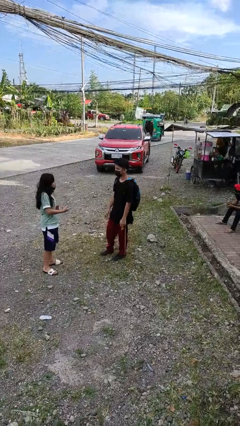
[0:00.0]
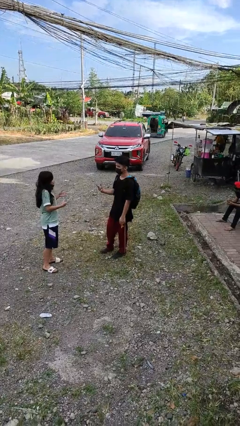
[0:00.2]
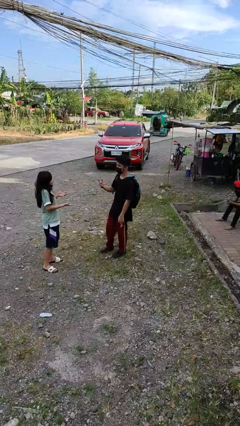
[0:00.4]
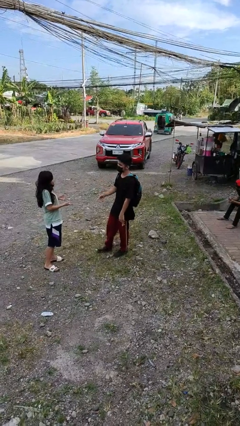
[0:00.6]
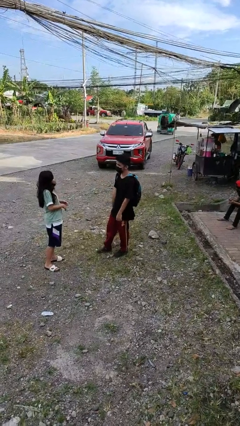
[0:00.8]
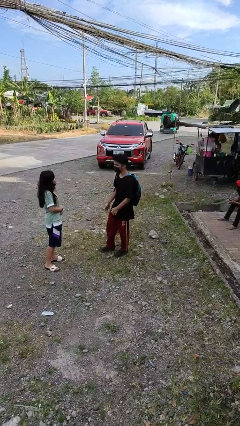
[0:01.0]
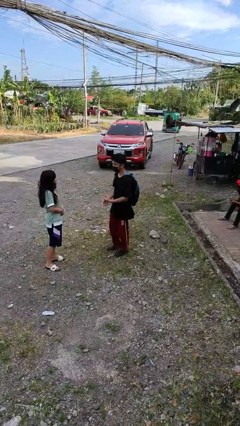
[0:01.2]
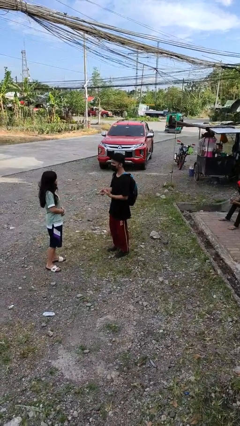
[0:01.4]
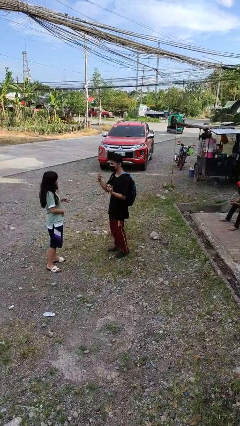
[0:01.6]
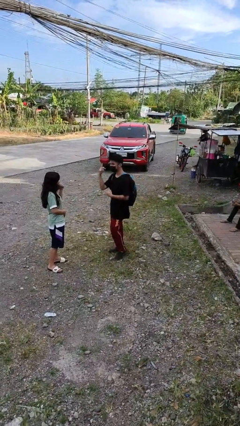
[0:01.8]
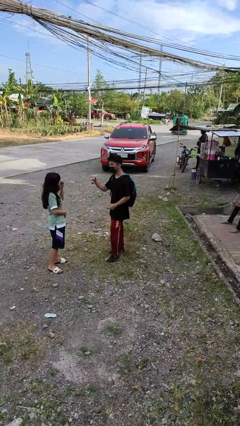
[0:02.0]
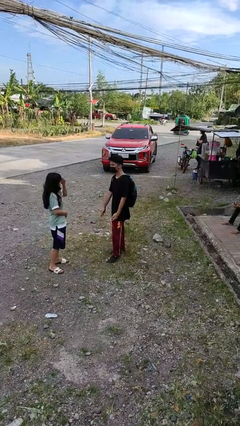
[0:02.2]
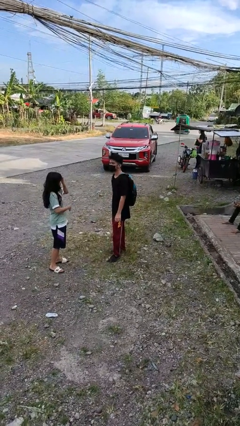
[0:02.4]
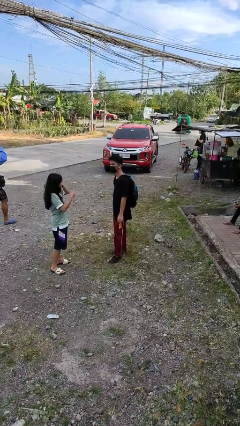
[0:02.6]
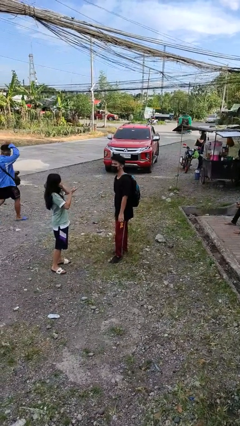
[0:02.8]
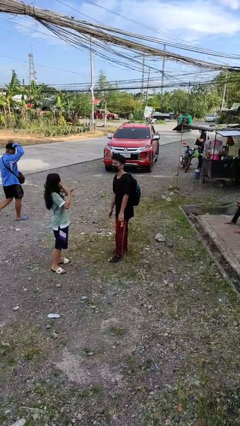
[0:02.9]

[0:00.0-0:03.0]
person talks to person

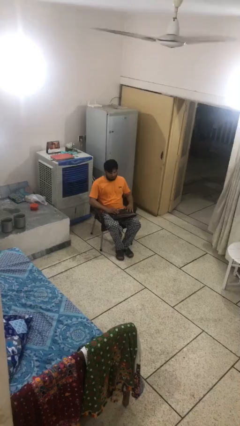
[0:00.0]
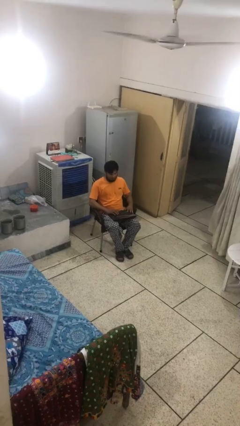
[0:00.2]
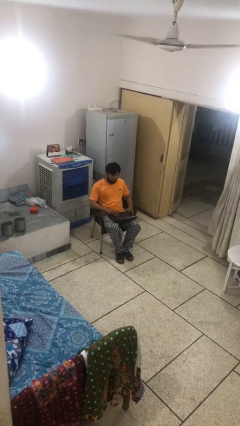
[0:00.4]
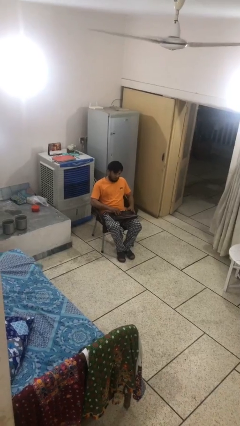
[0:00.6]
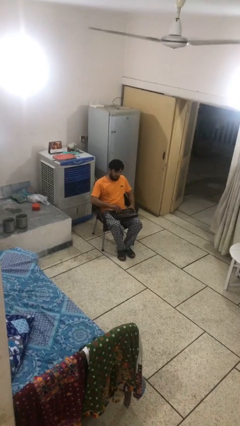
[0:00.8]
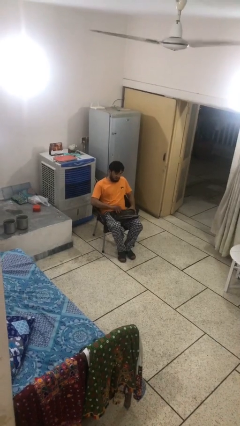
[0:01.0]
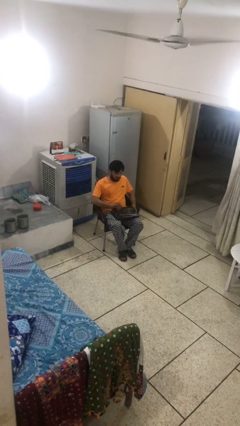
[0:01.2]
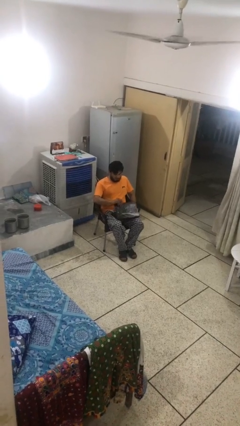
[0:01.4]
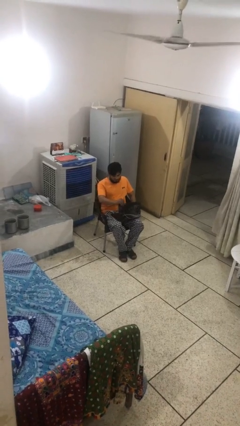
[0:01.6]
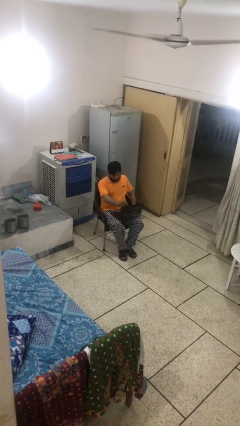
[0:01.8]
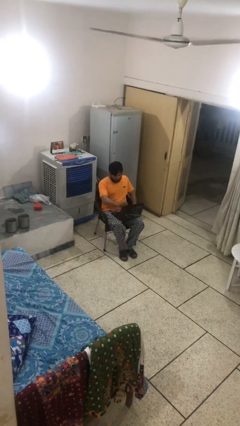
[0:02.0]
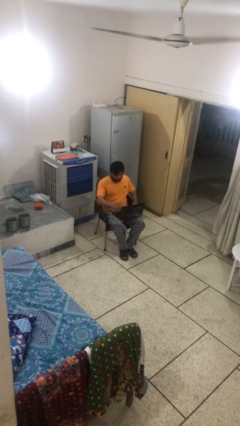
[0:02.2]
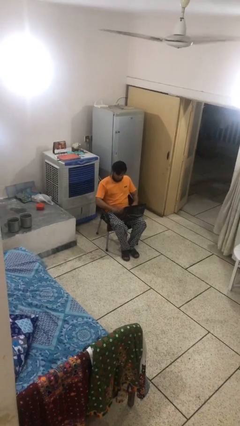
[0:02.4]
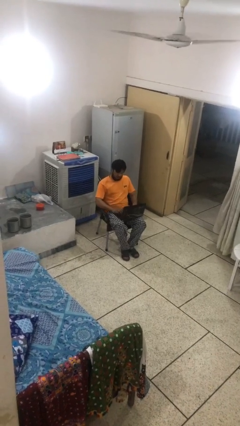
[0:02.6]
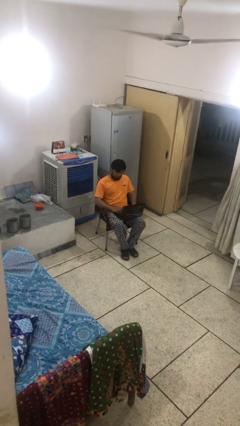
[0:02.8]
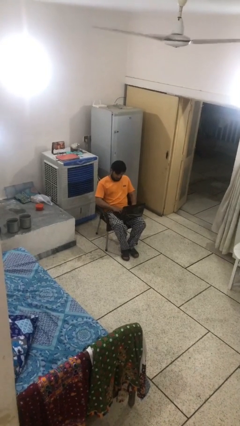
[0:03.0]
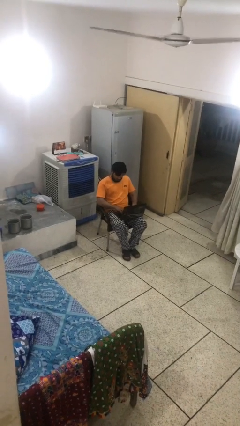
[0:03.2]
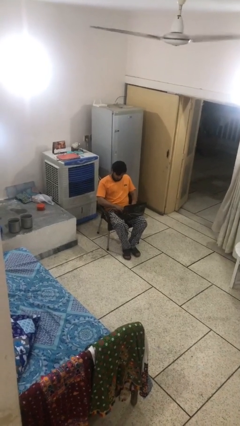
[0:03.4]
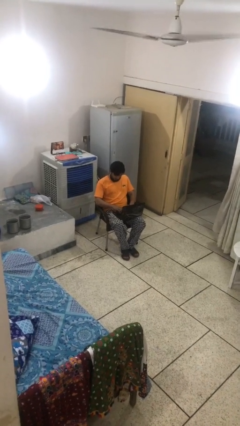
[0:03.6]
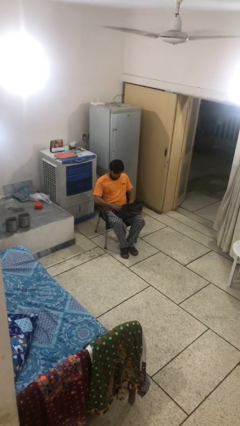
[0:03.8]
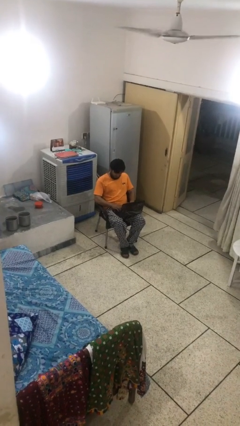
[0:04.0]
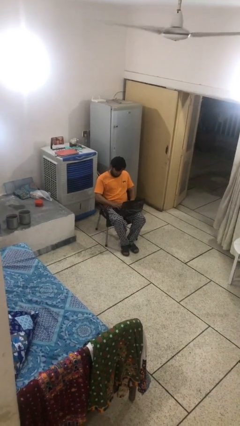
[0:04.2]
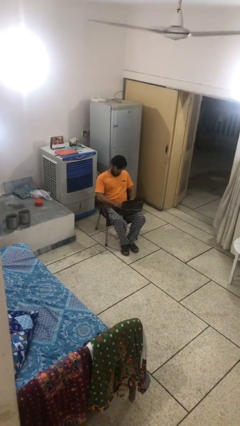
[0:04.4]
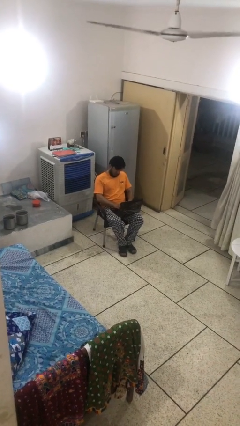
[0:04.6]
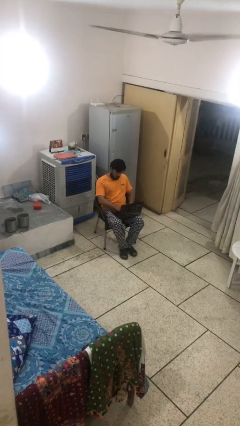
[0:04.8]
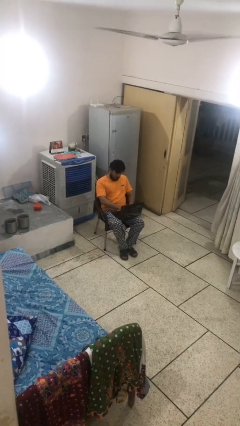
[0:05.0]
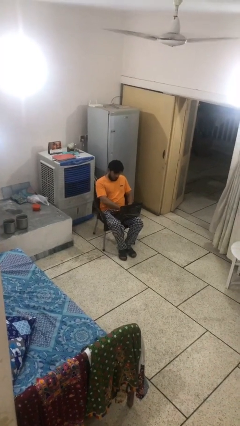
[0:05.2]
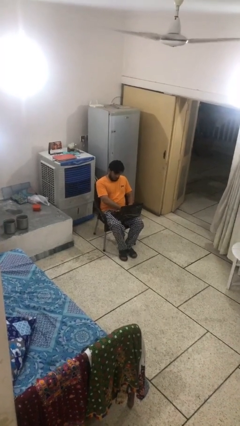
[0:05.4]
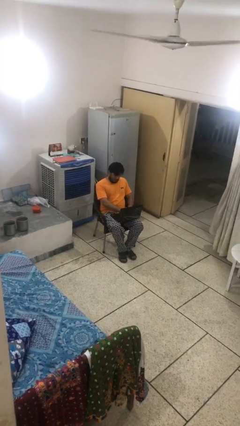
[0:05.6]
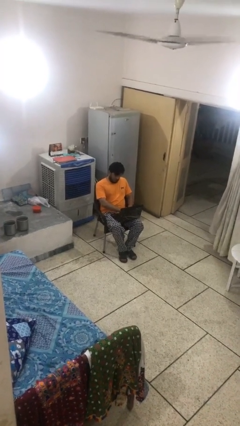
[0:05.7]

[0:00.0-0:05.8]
person interacts with laptop

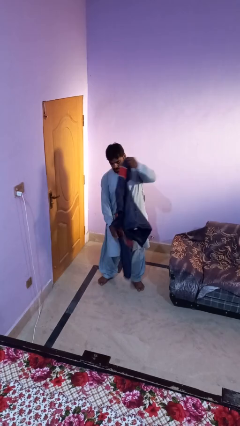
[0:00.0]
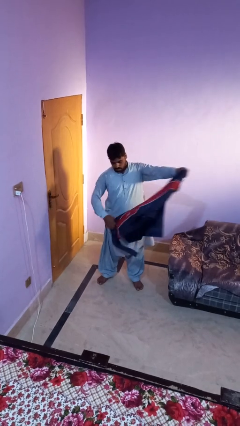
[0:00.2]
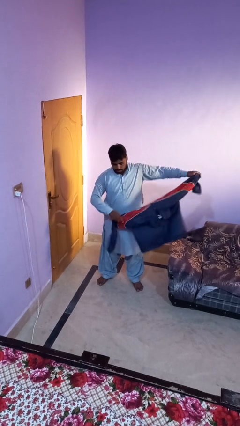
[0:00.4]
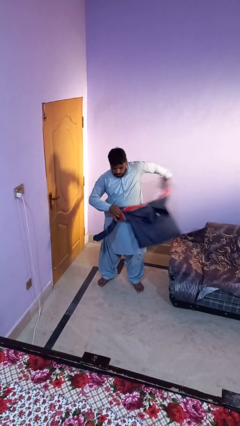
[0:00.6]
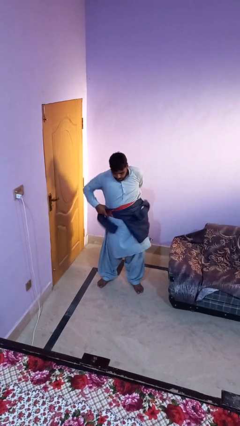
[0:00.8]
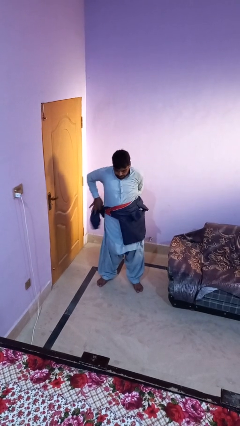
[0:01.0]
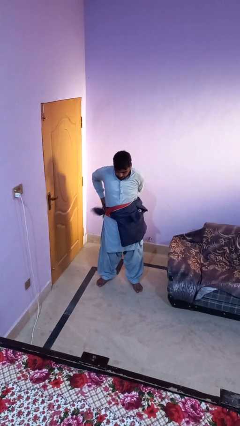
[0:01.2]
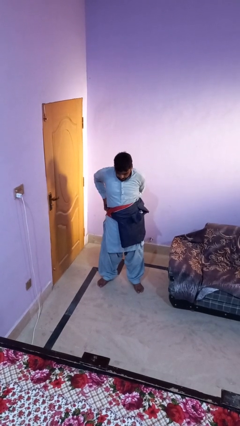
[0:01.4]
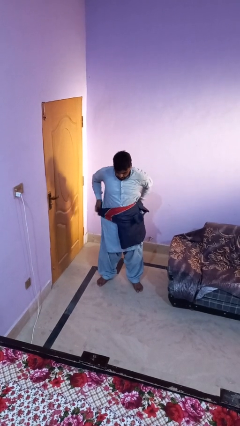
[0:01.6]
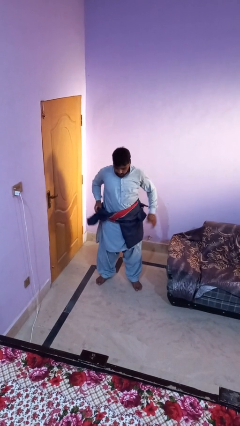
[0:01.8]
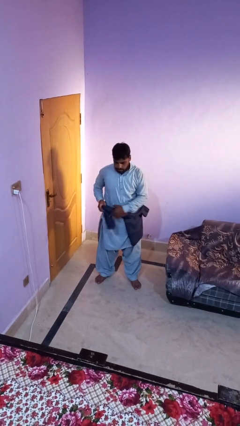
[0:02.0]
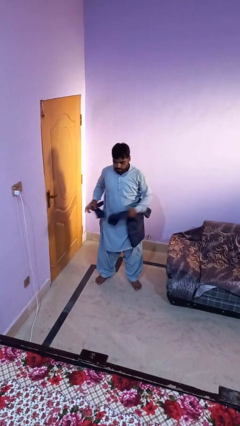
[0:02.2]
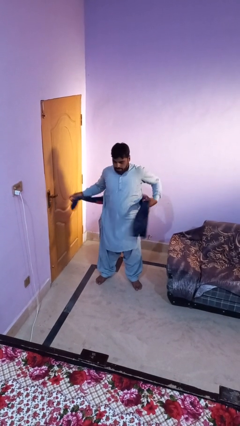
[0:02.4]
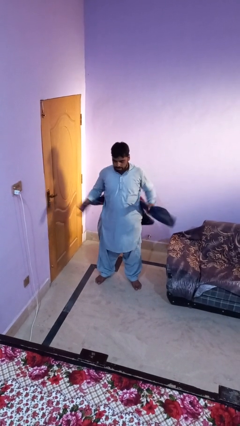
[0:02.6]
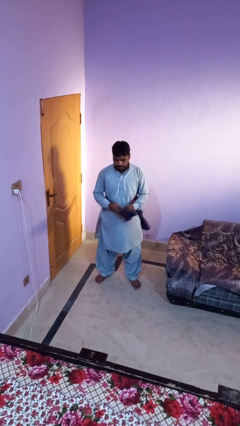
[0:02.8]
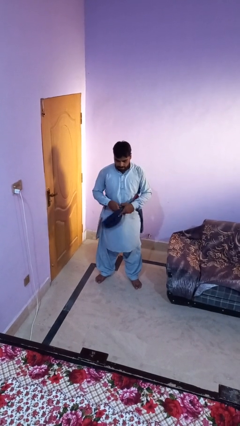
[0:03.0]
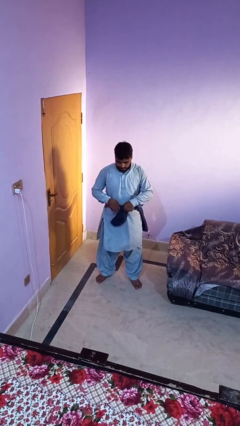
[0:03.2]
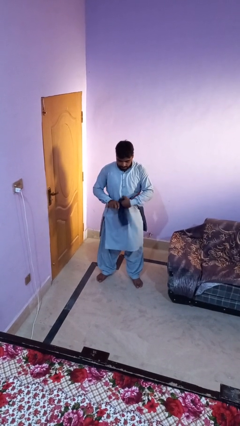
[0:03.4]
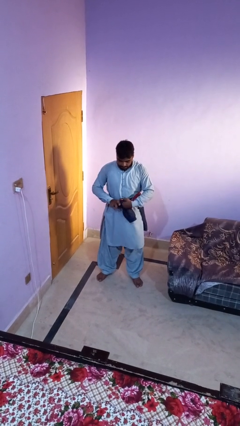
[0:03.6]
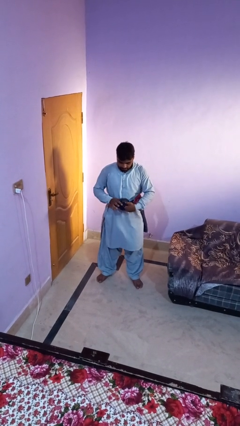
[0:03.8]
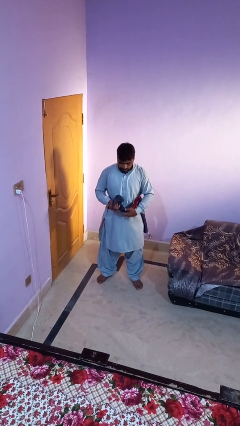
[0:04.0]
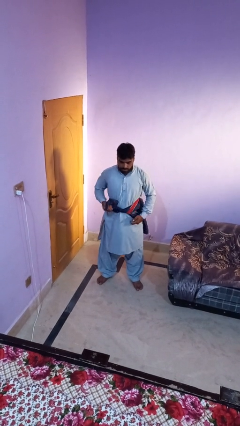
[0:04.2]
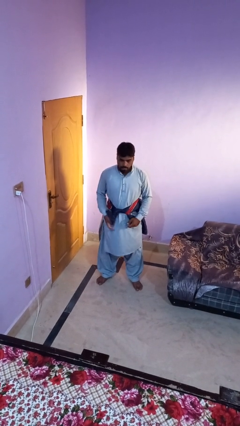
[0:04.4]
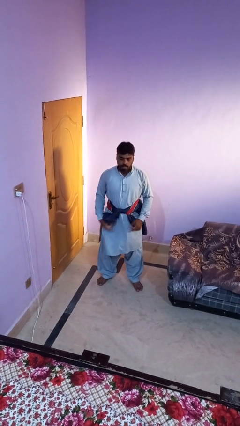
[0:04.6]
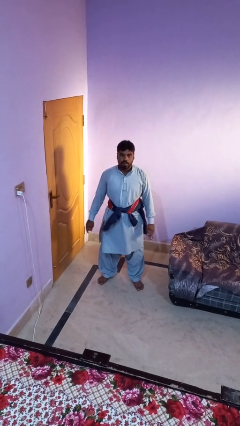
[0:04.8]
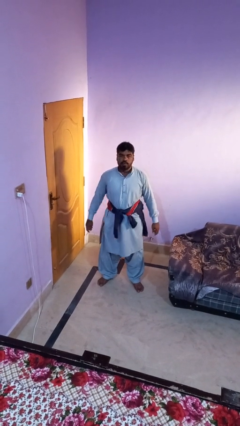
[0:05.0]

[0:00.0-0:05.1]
person ties jacket around waist

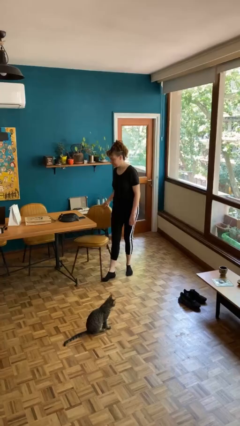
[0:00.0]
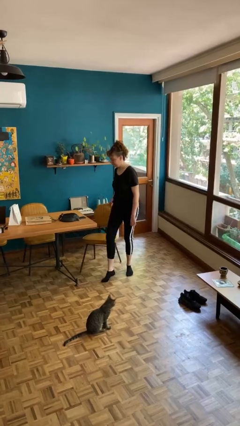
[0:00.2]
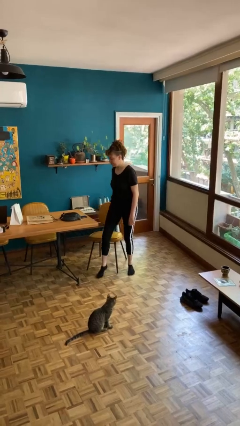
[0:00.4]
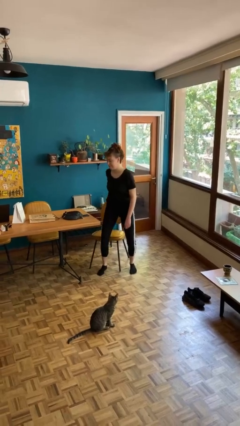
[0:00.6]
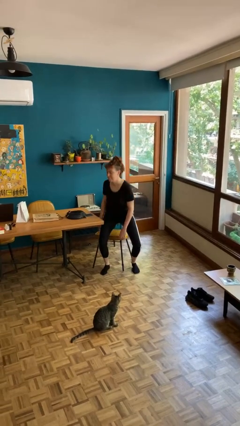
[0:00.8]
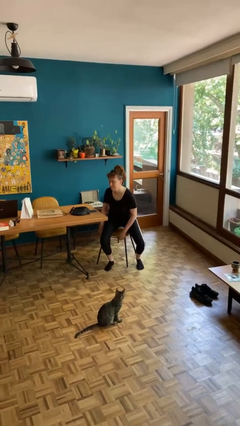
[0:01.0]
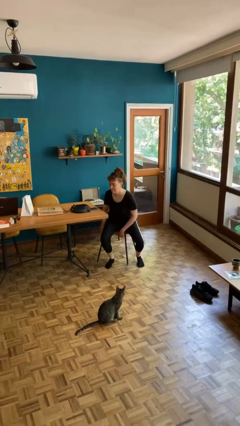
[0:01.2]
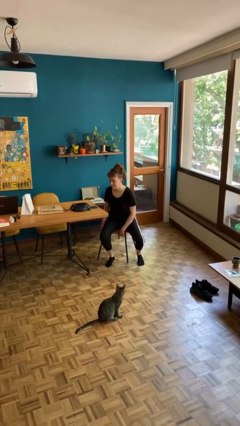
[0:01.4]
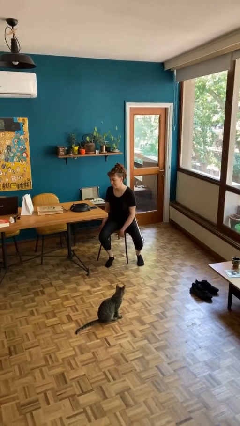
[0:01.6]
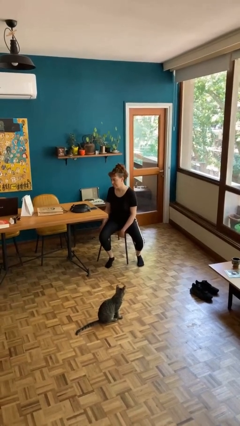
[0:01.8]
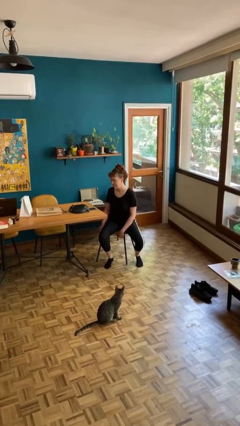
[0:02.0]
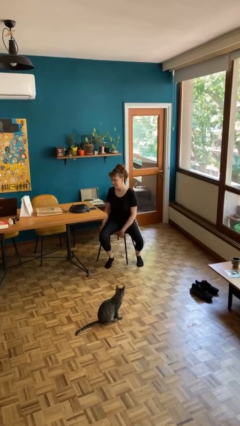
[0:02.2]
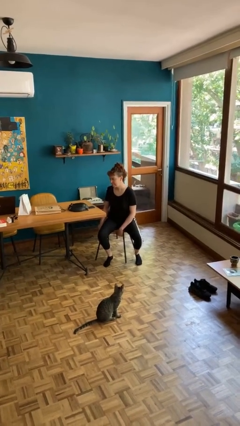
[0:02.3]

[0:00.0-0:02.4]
person sits down

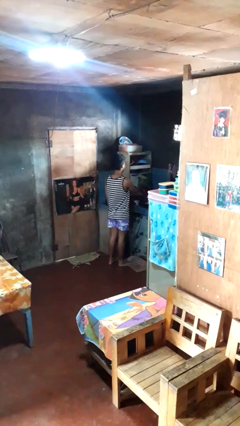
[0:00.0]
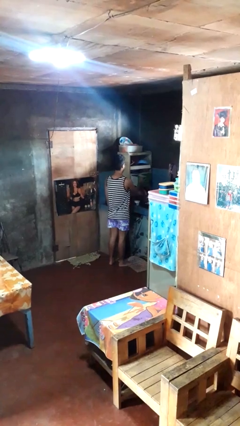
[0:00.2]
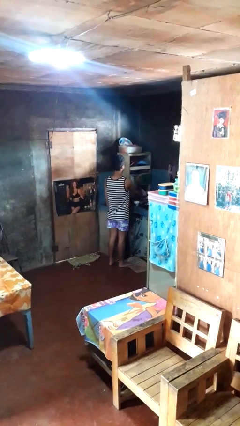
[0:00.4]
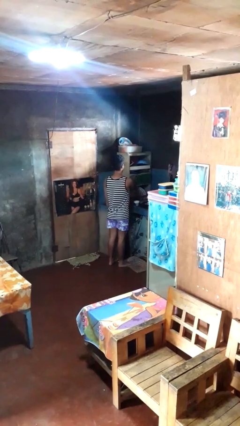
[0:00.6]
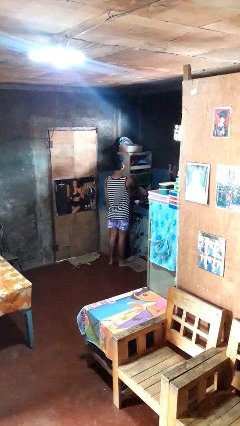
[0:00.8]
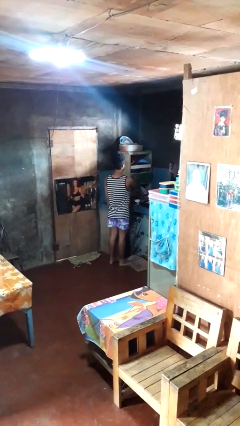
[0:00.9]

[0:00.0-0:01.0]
person closes kitchen drawer
